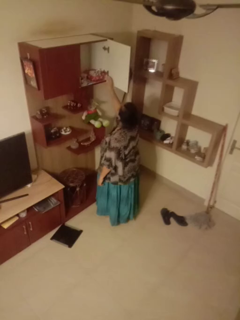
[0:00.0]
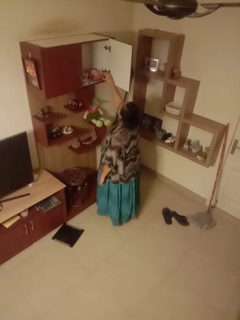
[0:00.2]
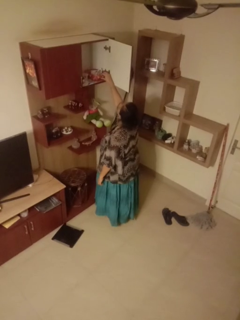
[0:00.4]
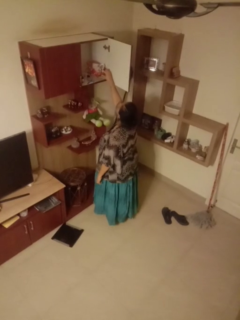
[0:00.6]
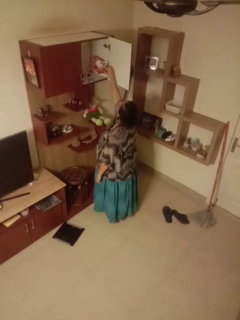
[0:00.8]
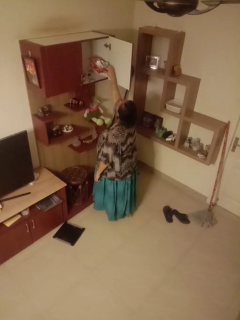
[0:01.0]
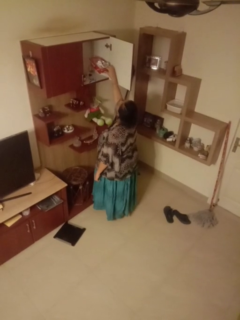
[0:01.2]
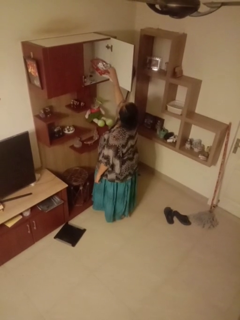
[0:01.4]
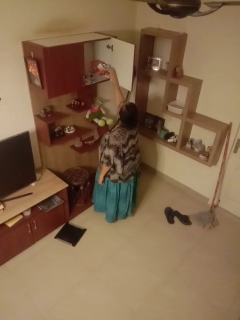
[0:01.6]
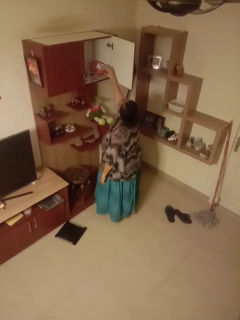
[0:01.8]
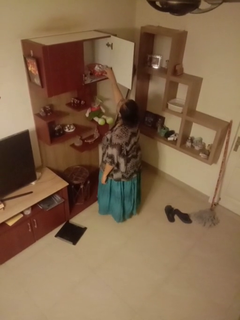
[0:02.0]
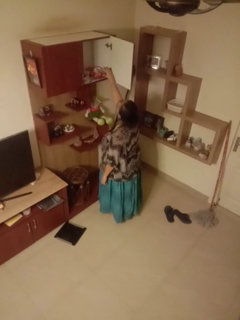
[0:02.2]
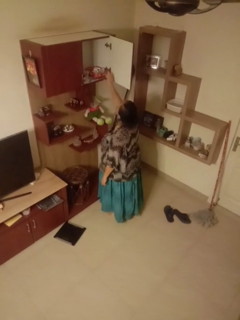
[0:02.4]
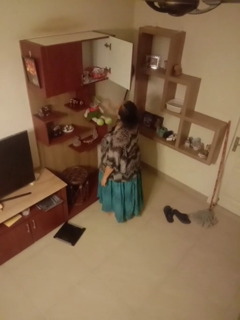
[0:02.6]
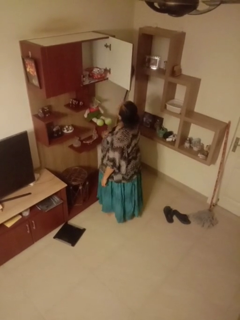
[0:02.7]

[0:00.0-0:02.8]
person searches in cabinet

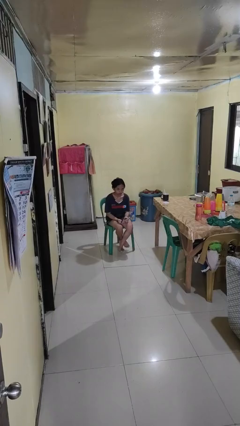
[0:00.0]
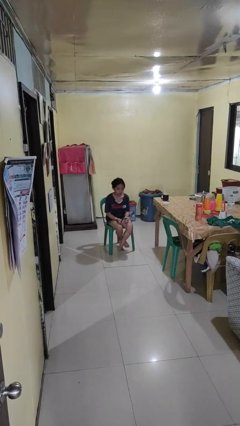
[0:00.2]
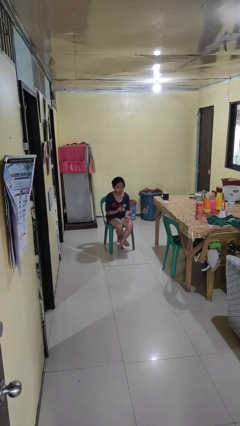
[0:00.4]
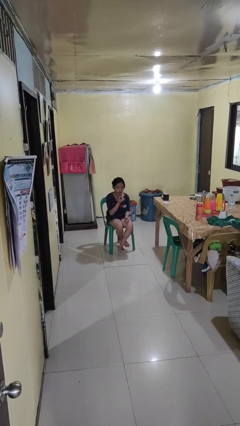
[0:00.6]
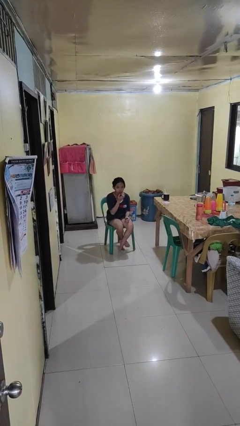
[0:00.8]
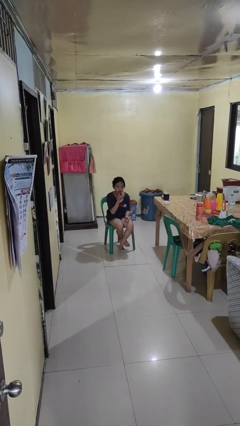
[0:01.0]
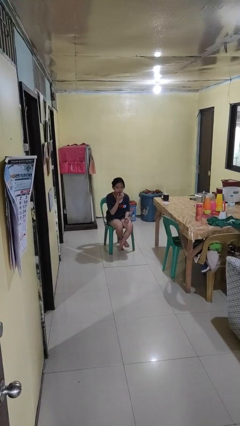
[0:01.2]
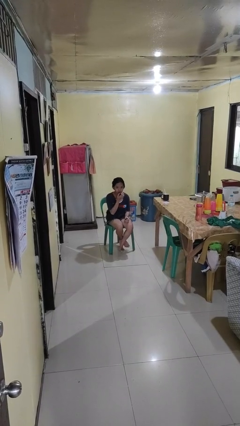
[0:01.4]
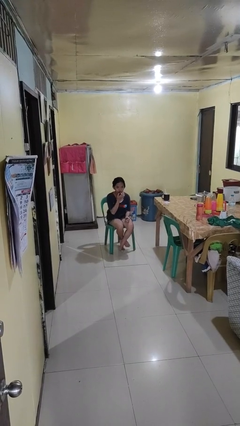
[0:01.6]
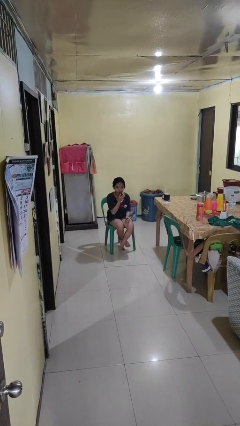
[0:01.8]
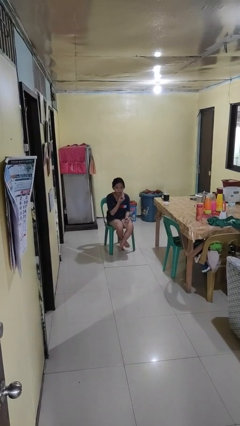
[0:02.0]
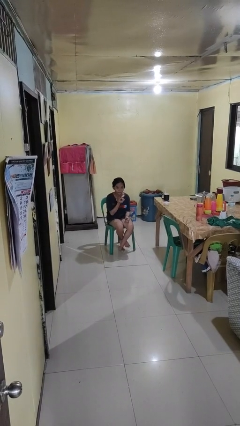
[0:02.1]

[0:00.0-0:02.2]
person applies lip makeup

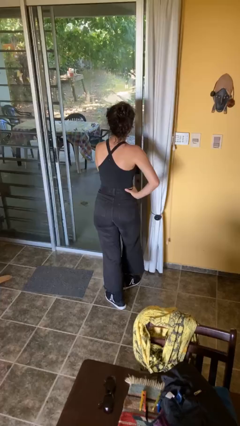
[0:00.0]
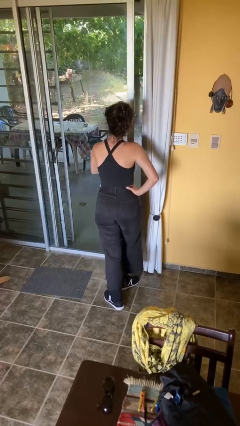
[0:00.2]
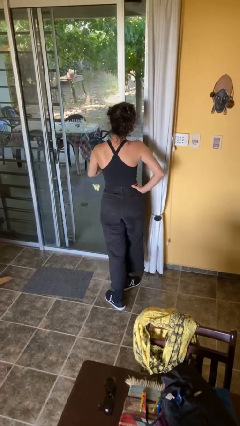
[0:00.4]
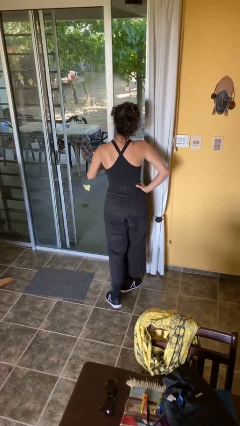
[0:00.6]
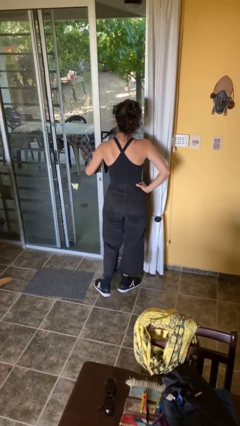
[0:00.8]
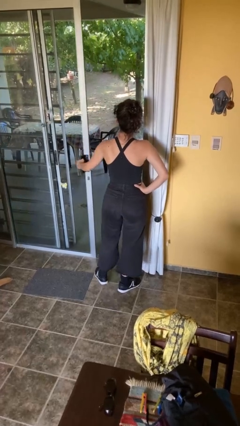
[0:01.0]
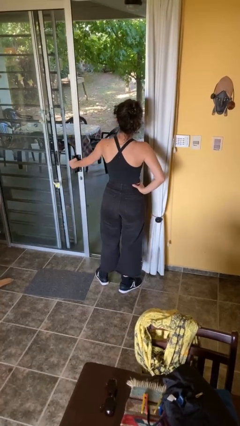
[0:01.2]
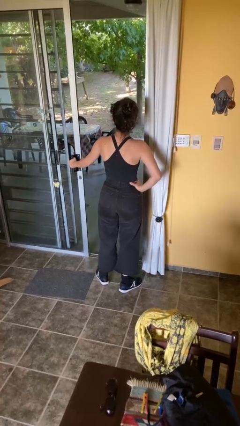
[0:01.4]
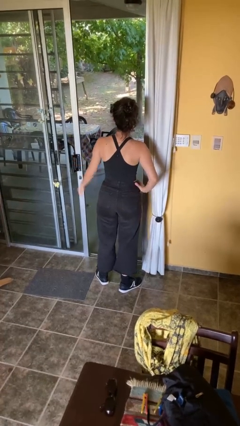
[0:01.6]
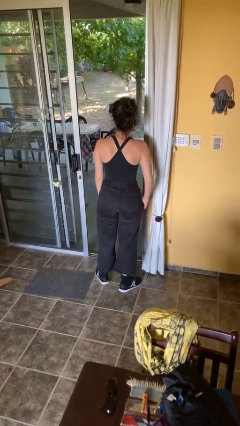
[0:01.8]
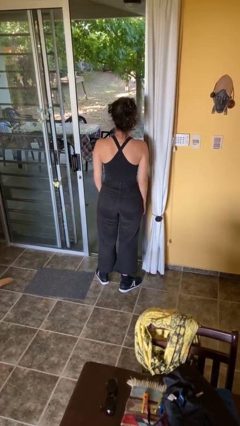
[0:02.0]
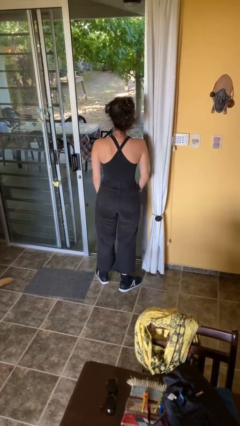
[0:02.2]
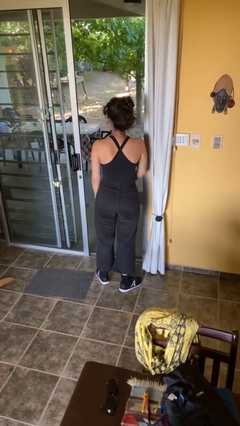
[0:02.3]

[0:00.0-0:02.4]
person opens facility door

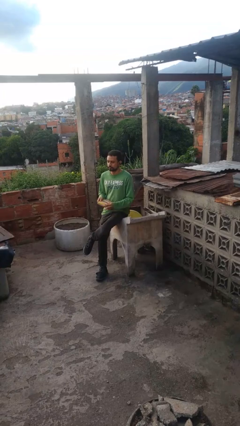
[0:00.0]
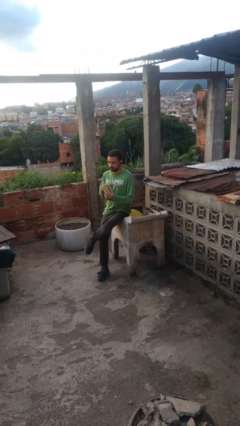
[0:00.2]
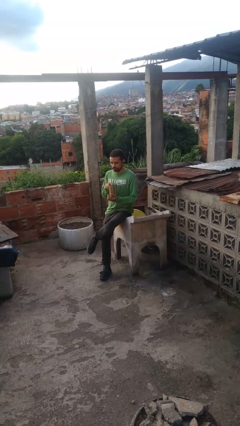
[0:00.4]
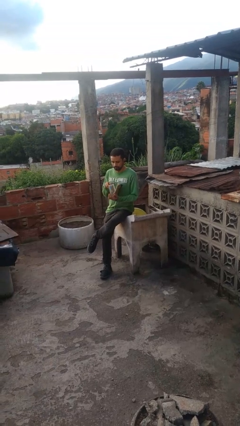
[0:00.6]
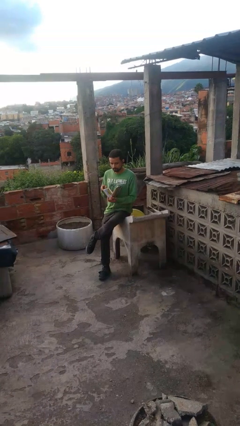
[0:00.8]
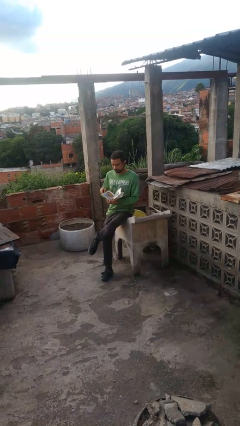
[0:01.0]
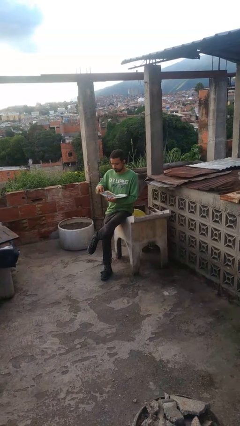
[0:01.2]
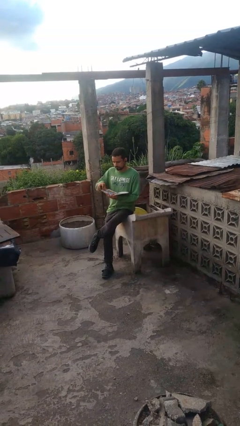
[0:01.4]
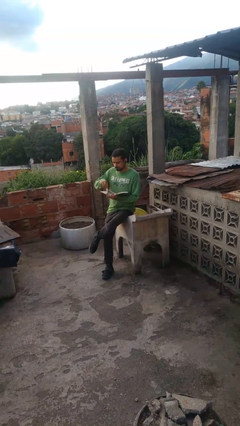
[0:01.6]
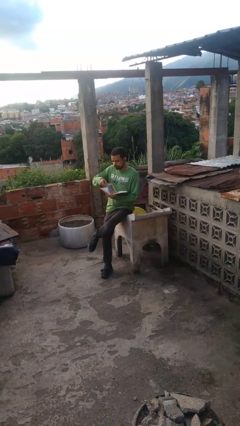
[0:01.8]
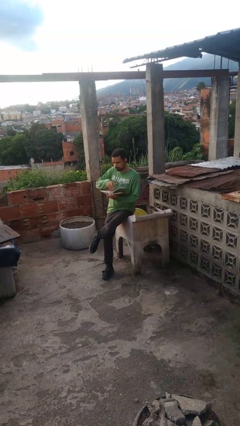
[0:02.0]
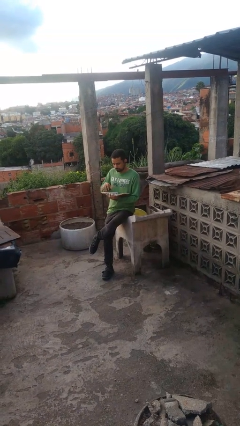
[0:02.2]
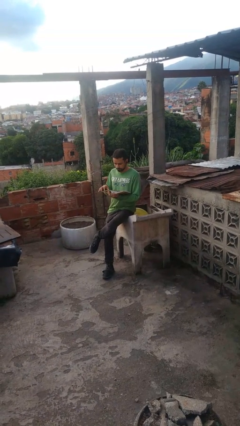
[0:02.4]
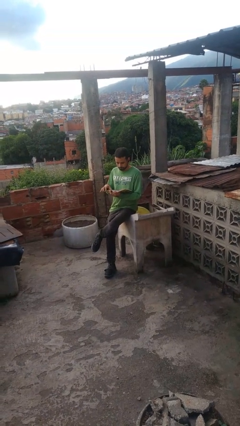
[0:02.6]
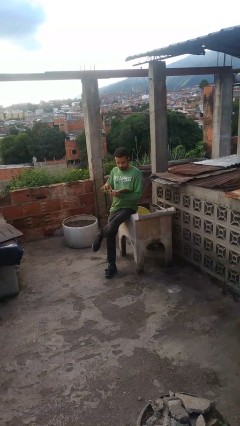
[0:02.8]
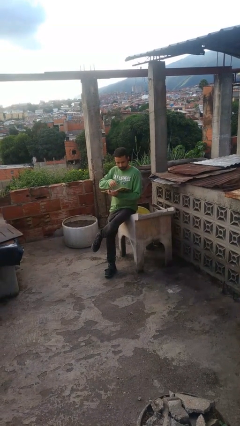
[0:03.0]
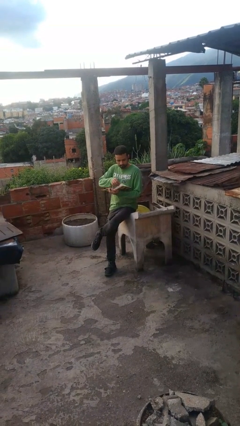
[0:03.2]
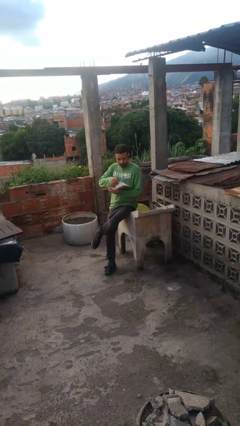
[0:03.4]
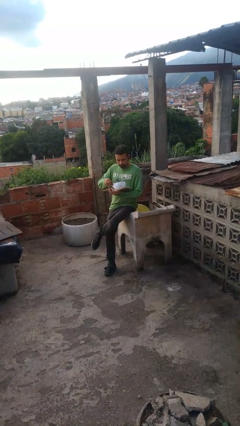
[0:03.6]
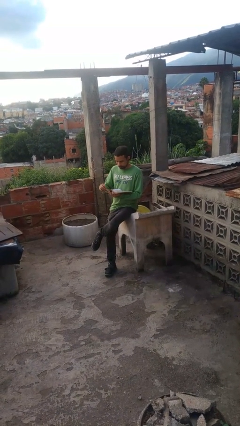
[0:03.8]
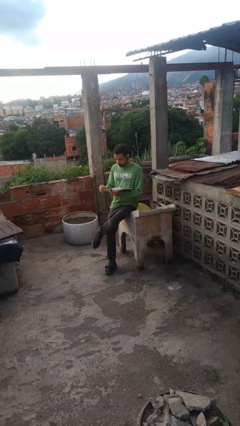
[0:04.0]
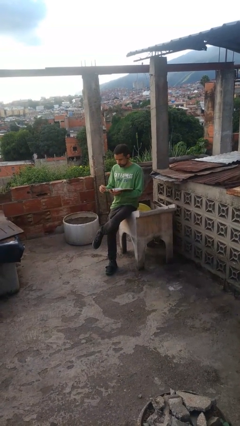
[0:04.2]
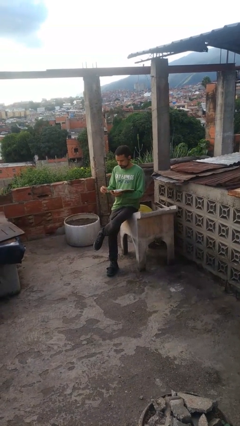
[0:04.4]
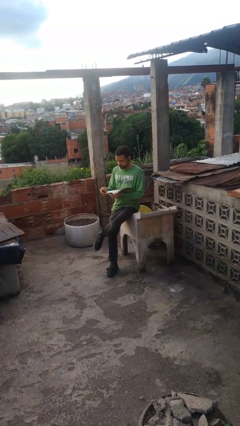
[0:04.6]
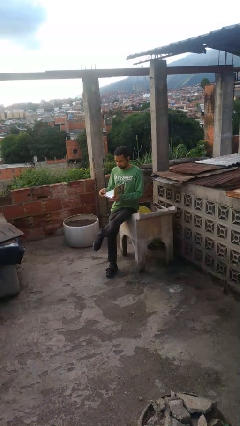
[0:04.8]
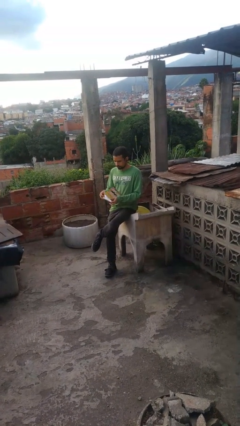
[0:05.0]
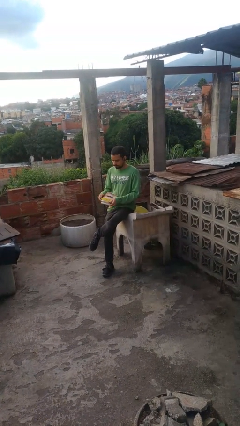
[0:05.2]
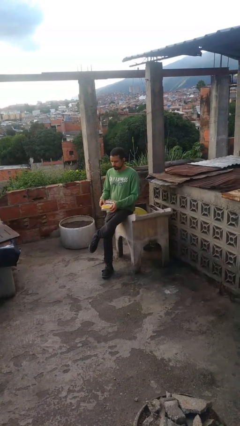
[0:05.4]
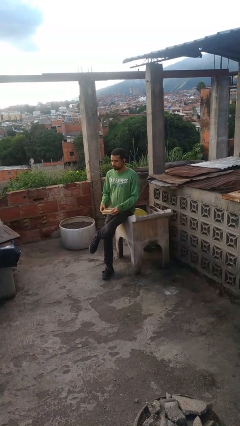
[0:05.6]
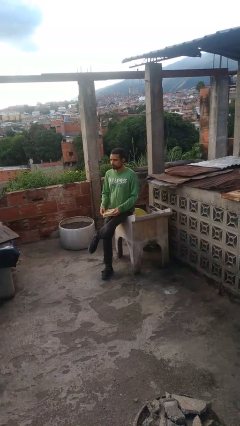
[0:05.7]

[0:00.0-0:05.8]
person reads book

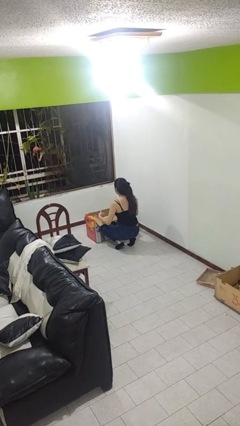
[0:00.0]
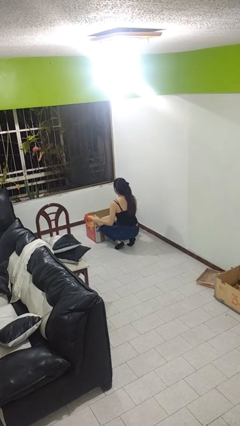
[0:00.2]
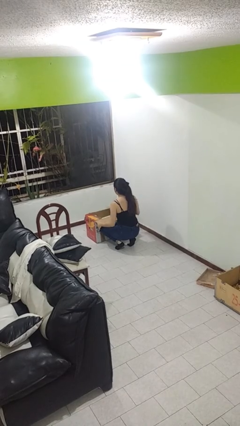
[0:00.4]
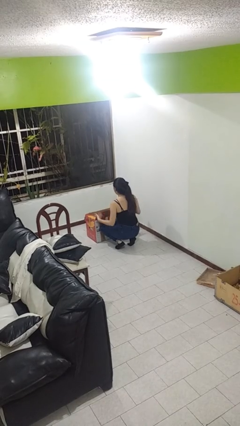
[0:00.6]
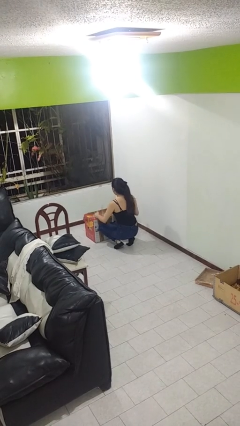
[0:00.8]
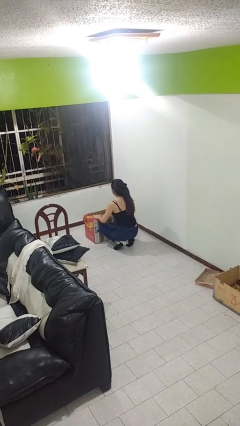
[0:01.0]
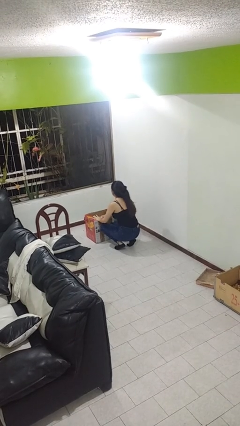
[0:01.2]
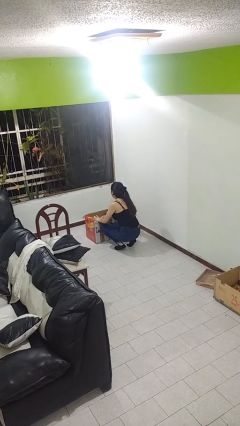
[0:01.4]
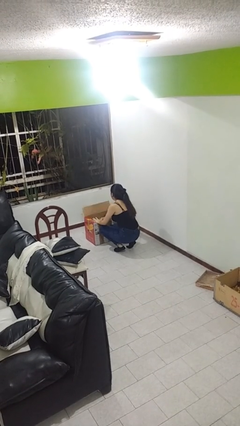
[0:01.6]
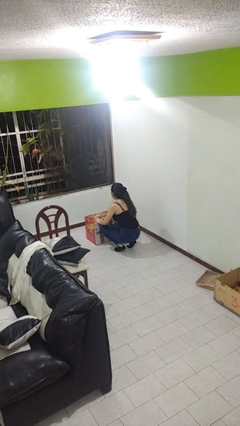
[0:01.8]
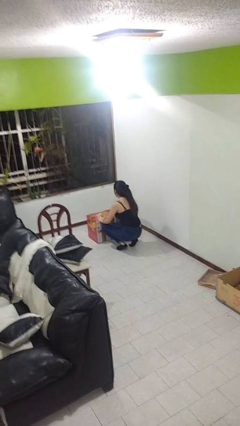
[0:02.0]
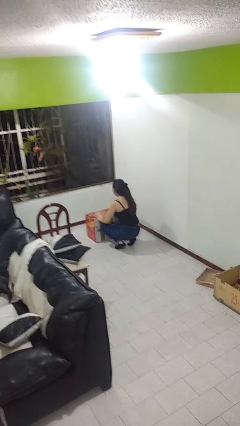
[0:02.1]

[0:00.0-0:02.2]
person closes box

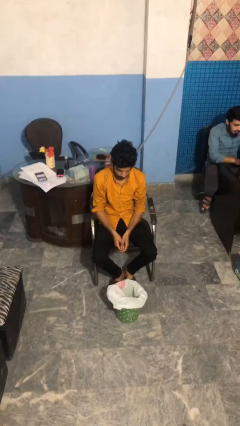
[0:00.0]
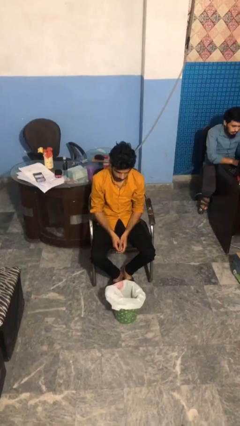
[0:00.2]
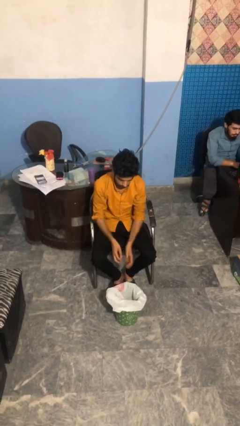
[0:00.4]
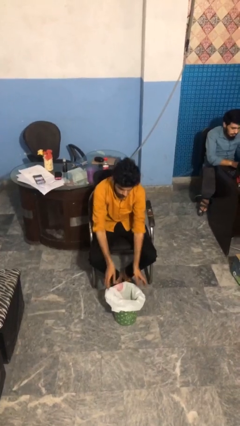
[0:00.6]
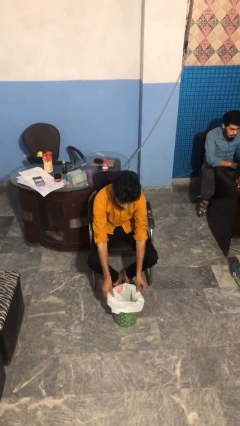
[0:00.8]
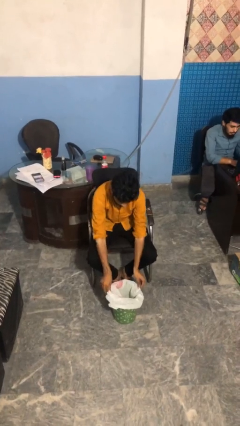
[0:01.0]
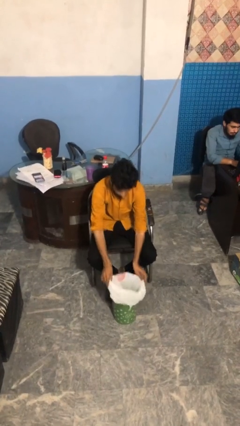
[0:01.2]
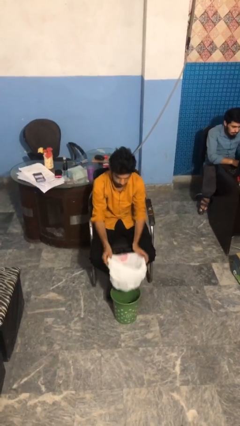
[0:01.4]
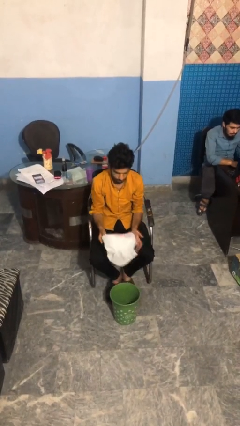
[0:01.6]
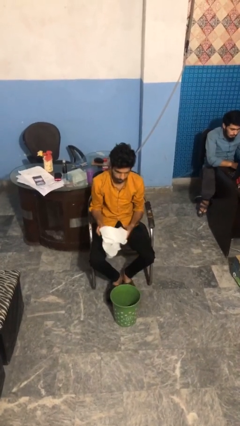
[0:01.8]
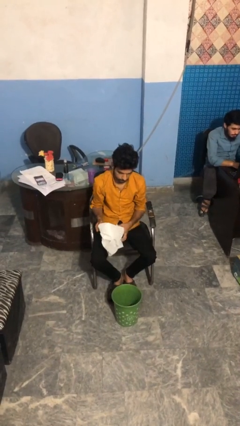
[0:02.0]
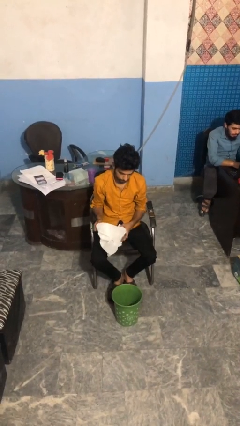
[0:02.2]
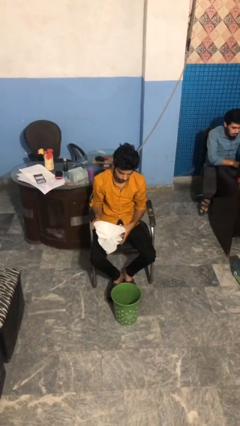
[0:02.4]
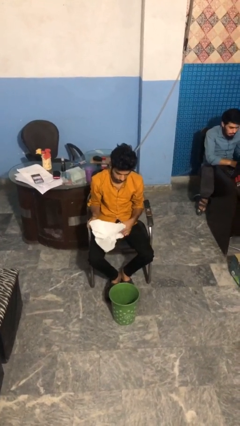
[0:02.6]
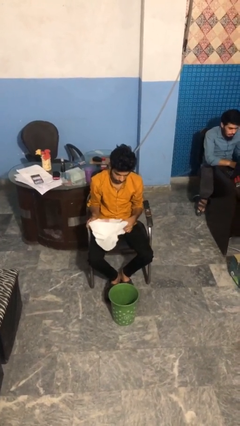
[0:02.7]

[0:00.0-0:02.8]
person removes trashbag from trashcan
